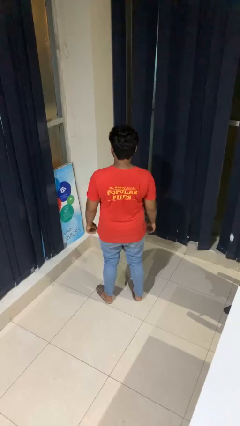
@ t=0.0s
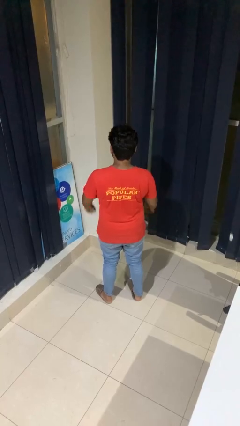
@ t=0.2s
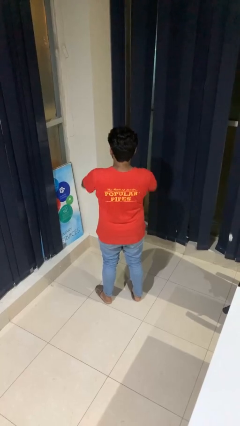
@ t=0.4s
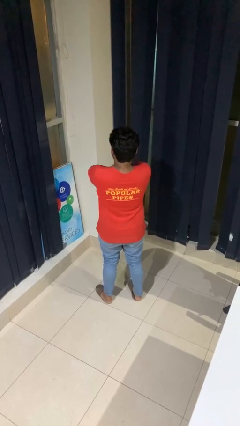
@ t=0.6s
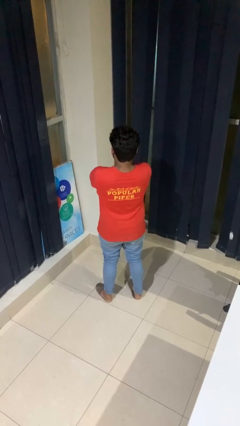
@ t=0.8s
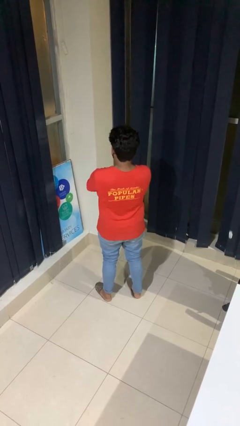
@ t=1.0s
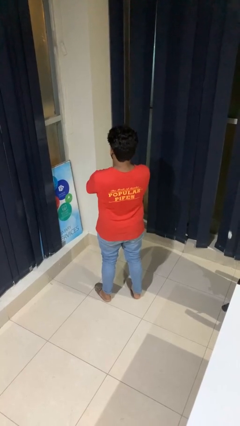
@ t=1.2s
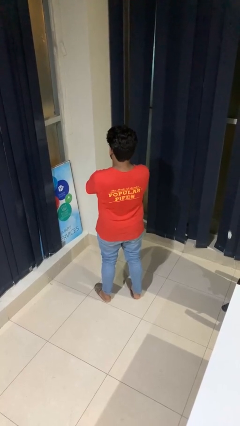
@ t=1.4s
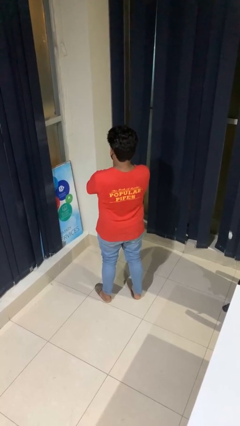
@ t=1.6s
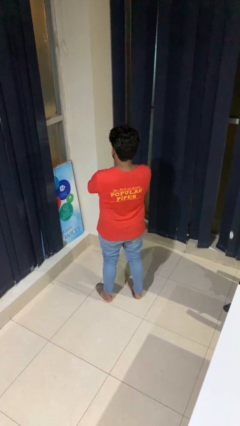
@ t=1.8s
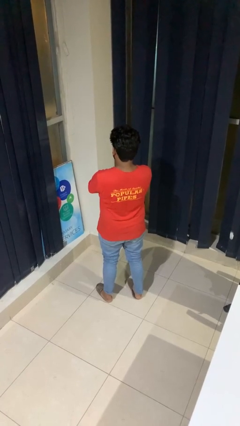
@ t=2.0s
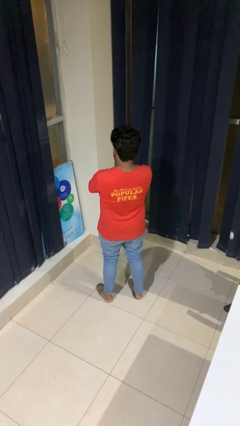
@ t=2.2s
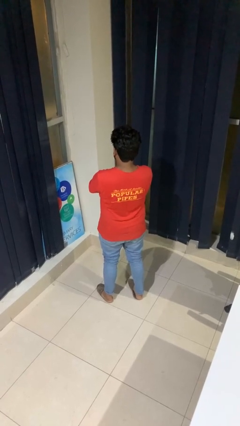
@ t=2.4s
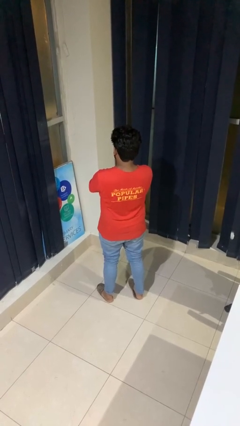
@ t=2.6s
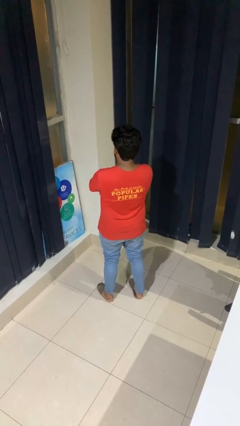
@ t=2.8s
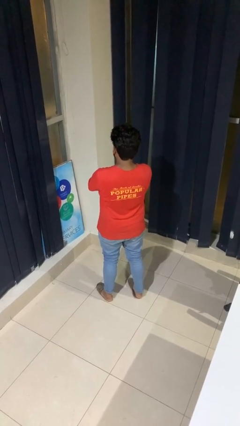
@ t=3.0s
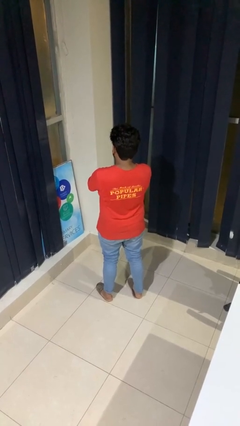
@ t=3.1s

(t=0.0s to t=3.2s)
person crosses arms

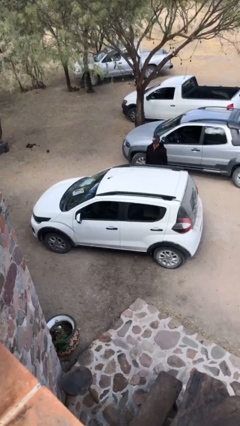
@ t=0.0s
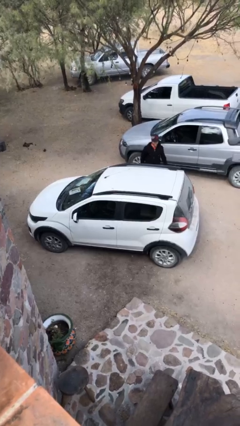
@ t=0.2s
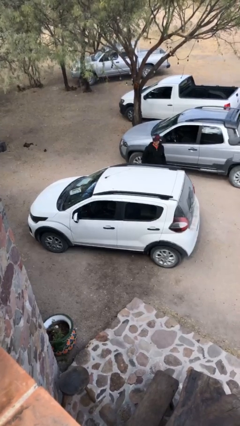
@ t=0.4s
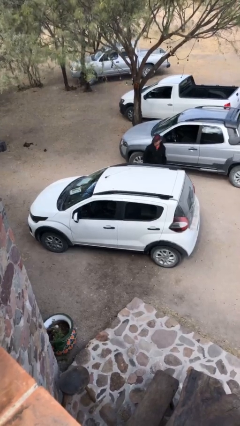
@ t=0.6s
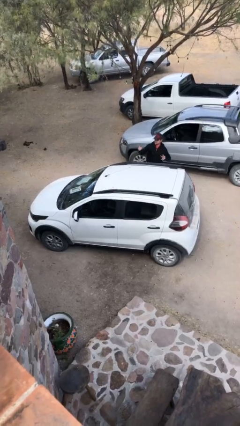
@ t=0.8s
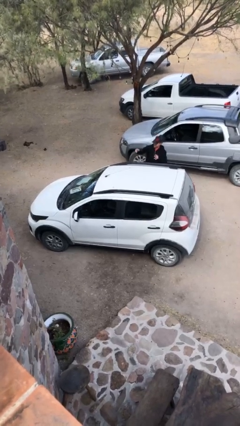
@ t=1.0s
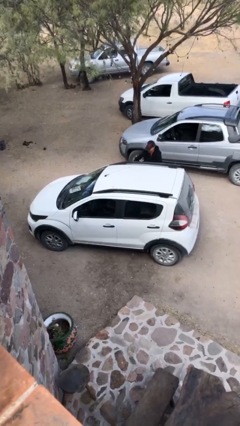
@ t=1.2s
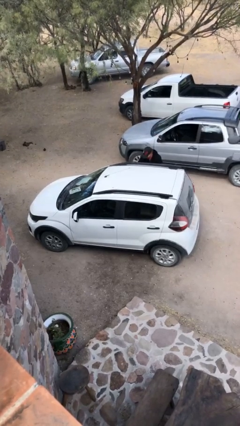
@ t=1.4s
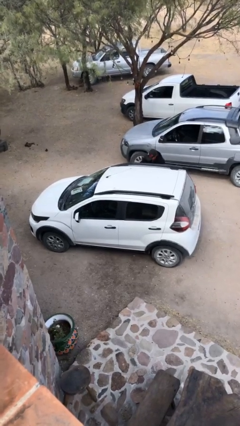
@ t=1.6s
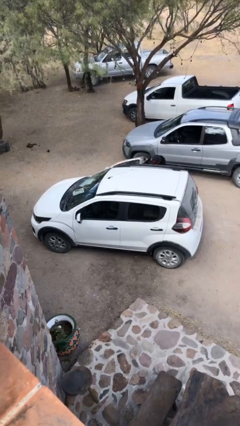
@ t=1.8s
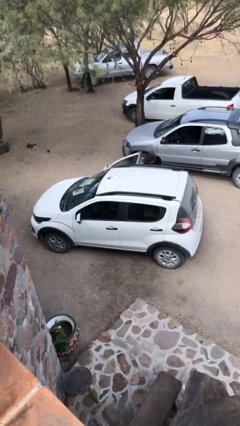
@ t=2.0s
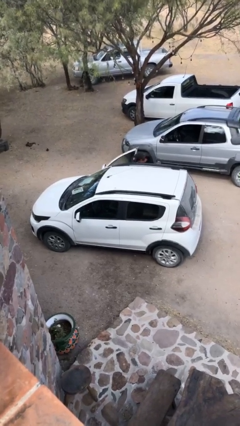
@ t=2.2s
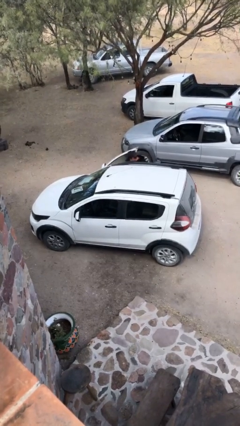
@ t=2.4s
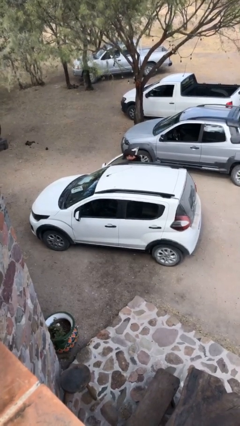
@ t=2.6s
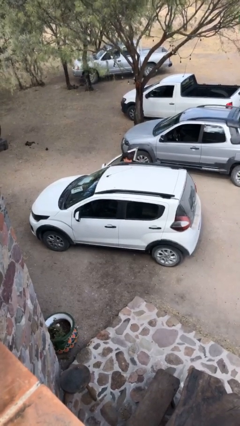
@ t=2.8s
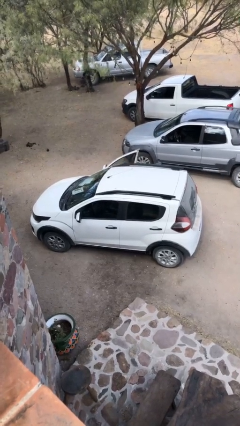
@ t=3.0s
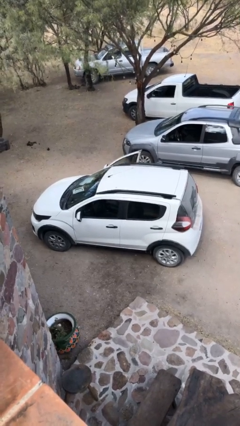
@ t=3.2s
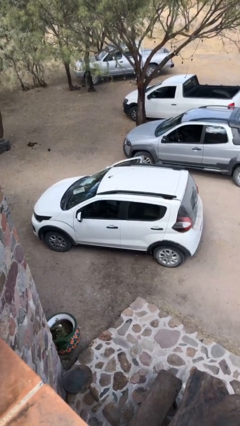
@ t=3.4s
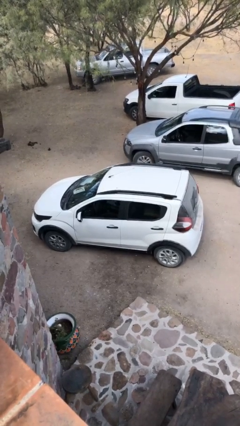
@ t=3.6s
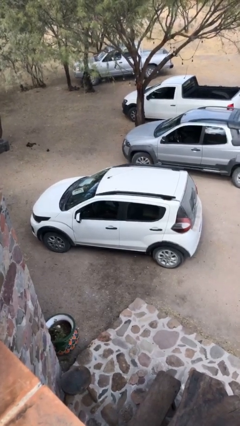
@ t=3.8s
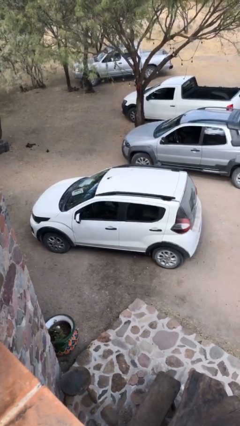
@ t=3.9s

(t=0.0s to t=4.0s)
car picks up person

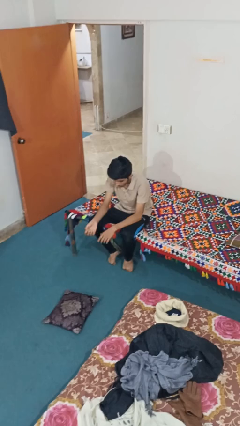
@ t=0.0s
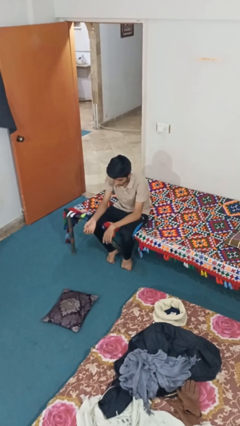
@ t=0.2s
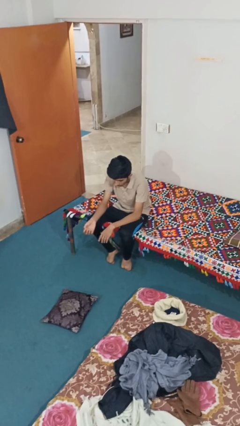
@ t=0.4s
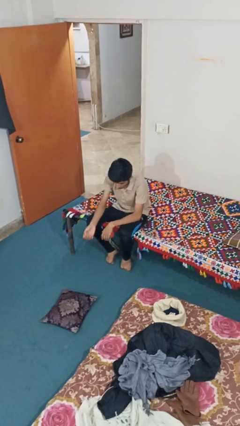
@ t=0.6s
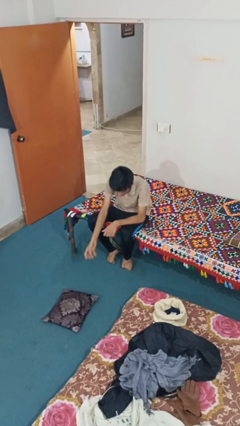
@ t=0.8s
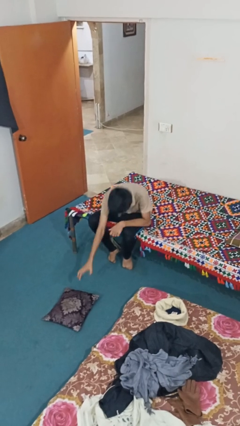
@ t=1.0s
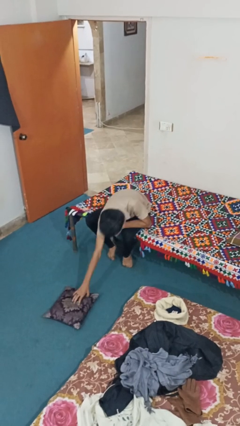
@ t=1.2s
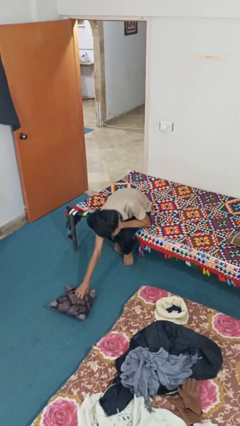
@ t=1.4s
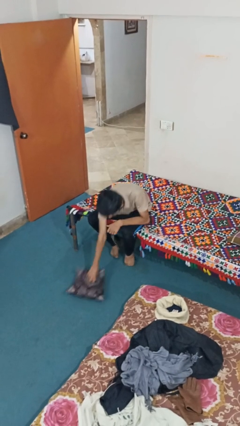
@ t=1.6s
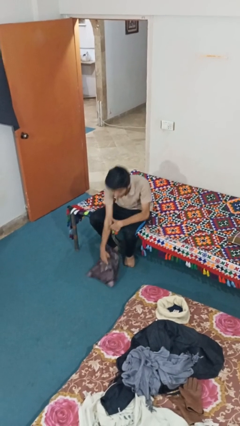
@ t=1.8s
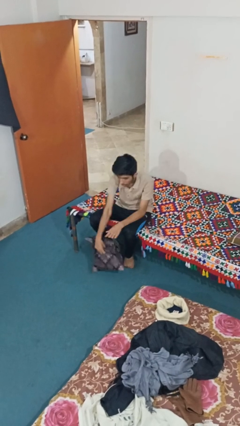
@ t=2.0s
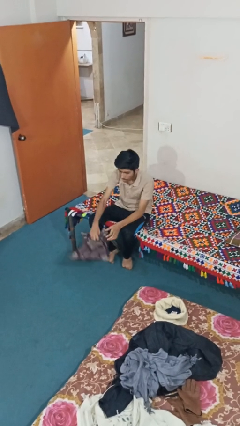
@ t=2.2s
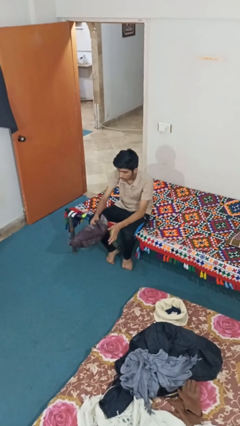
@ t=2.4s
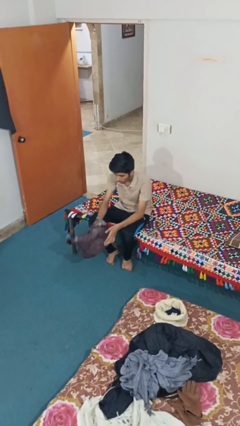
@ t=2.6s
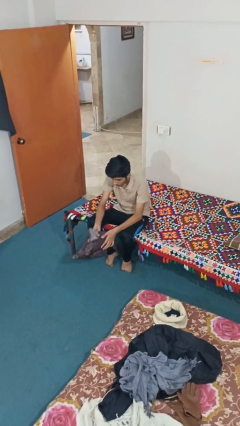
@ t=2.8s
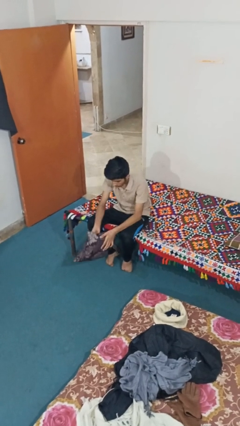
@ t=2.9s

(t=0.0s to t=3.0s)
person picks up object from floor

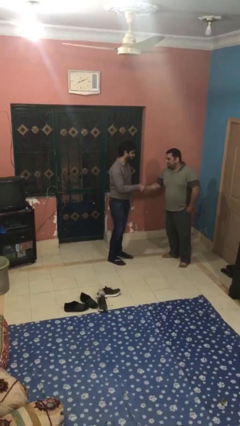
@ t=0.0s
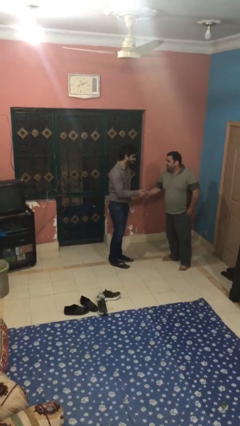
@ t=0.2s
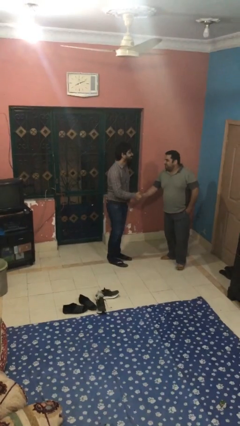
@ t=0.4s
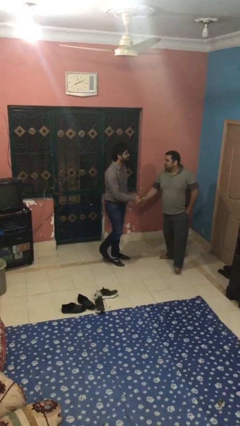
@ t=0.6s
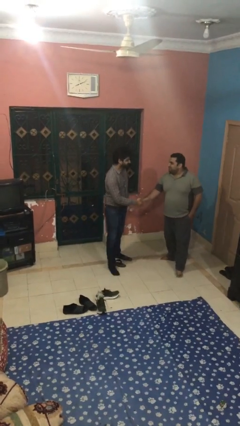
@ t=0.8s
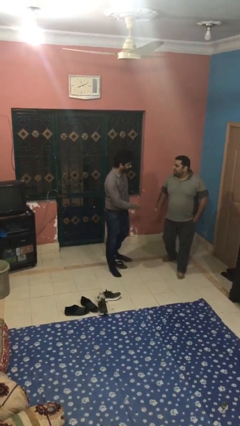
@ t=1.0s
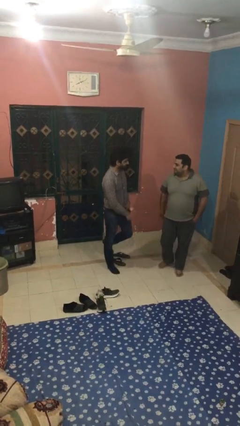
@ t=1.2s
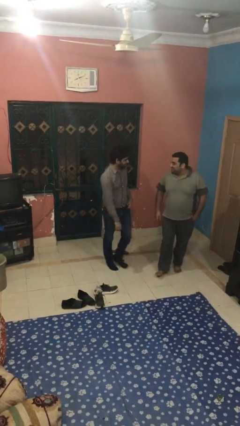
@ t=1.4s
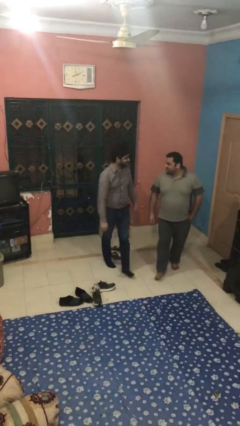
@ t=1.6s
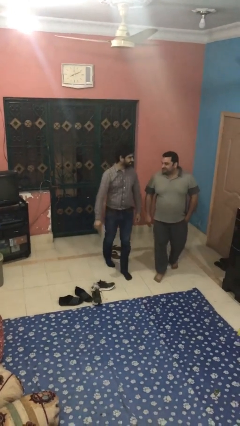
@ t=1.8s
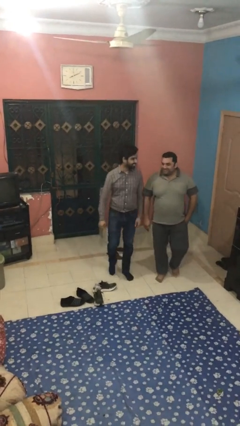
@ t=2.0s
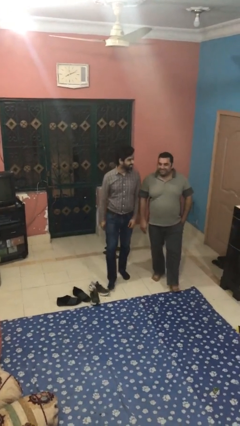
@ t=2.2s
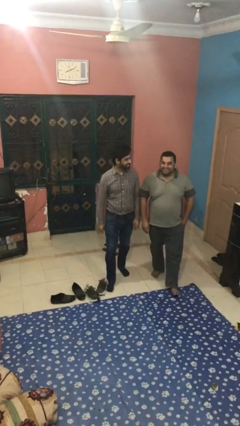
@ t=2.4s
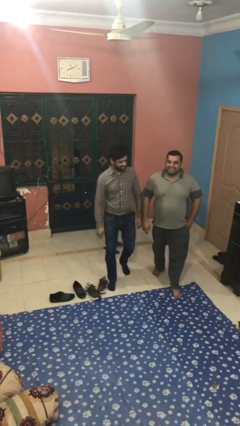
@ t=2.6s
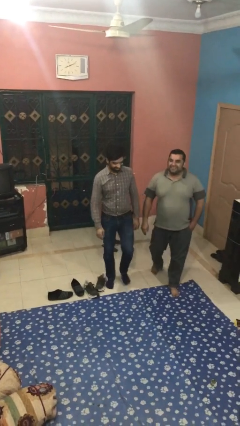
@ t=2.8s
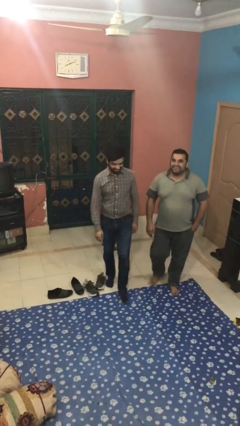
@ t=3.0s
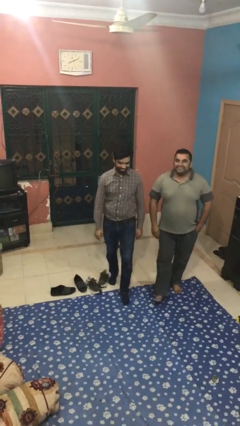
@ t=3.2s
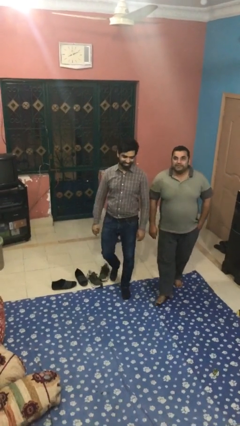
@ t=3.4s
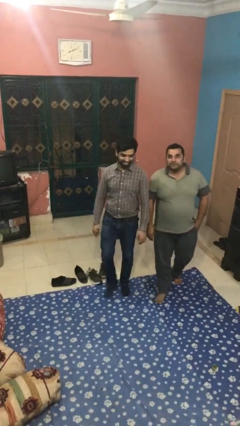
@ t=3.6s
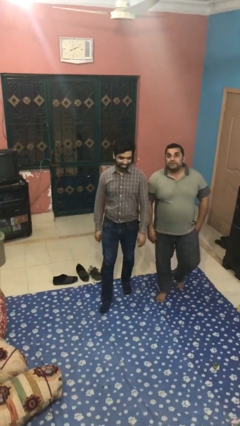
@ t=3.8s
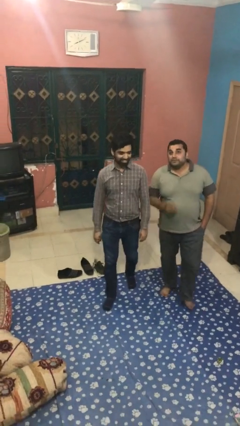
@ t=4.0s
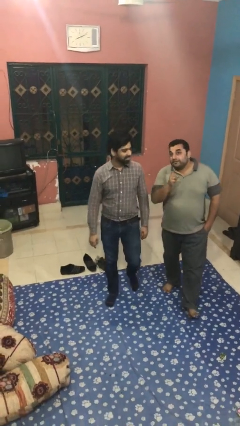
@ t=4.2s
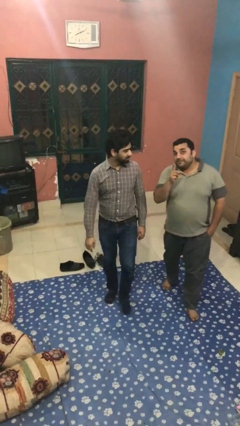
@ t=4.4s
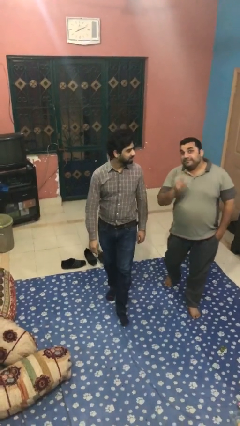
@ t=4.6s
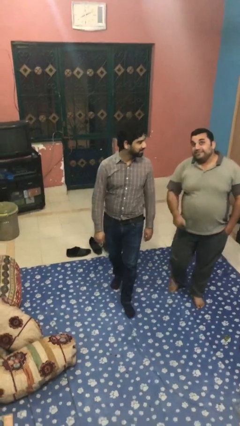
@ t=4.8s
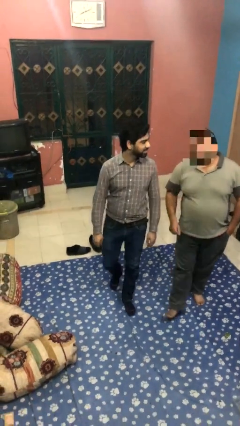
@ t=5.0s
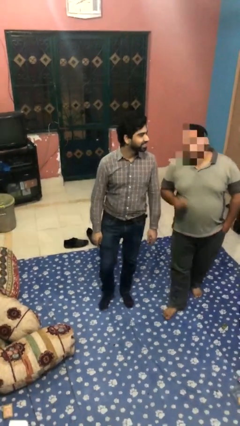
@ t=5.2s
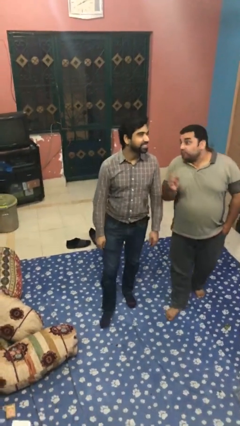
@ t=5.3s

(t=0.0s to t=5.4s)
person talks to person

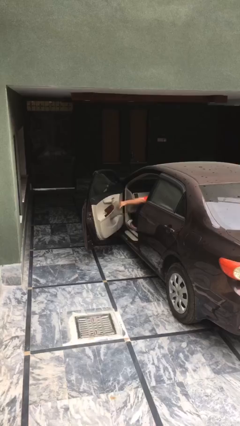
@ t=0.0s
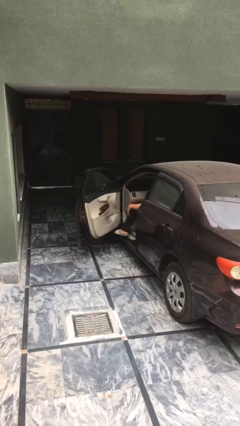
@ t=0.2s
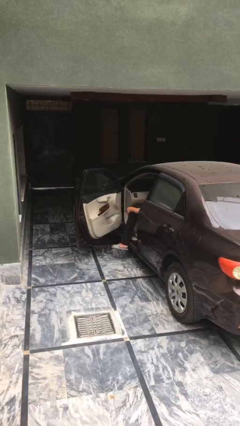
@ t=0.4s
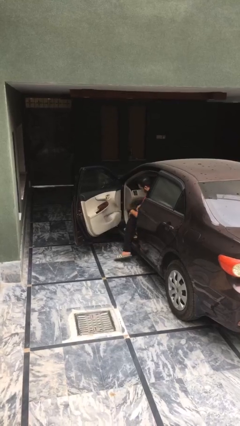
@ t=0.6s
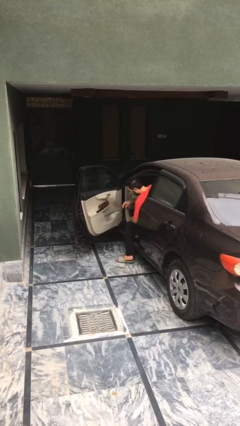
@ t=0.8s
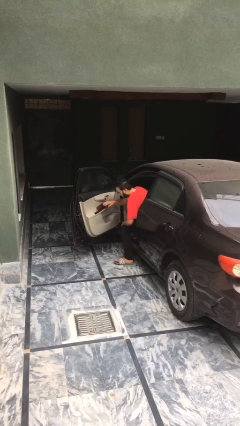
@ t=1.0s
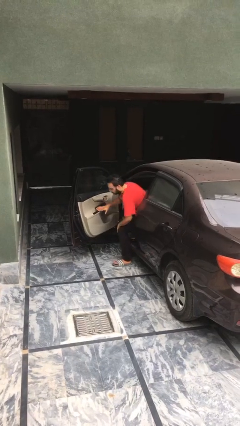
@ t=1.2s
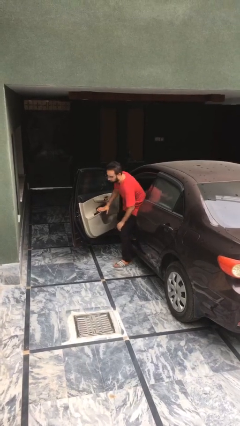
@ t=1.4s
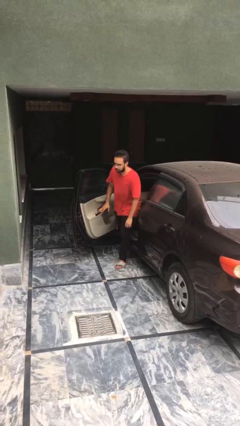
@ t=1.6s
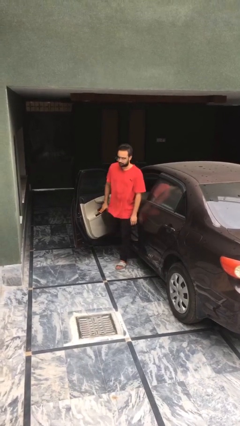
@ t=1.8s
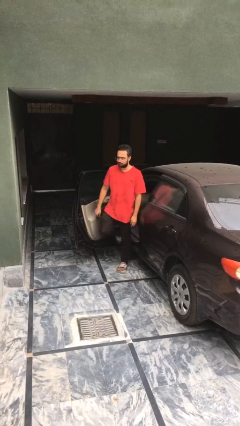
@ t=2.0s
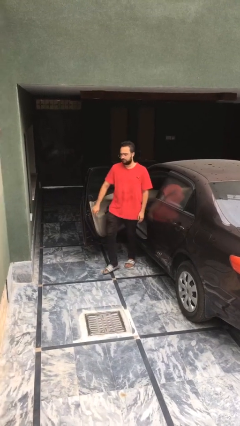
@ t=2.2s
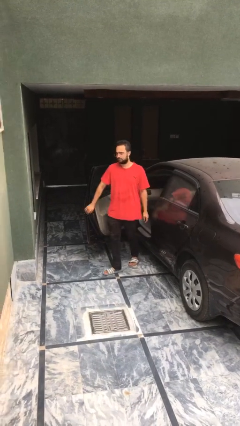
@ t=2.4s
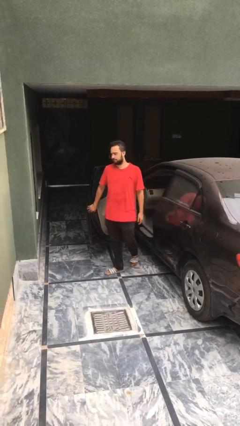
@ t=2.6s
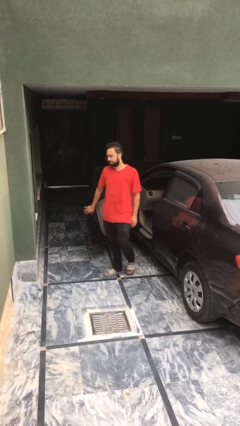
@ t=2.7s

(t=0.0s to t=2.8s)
person exits car
